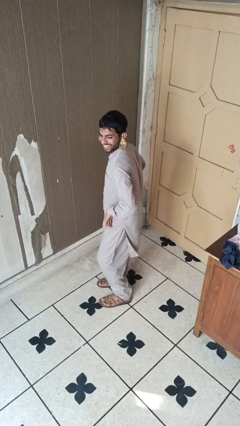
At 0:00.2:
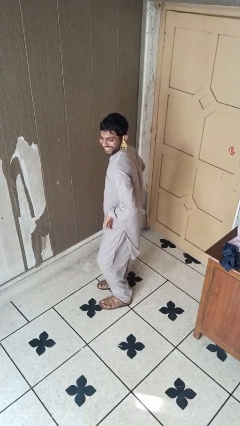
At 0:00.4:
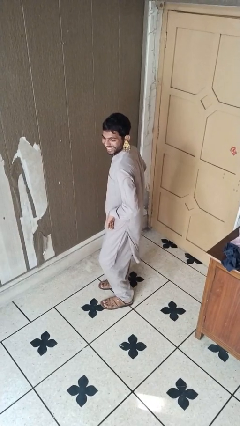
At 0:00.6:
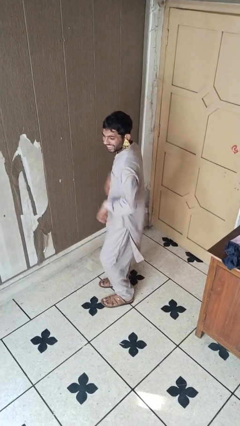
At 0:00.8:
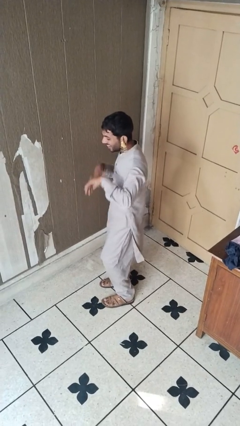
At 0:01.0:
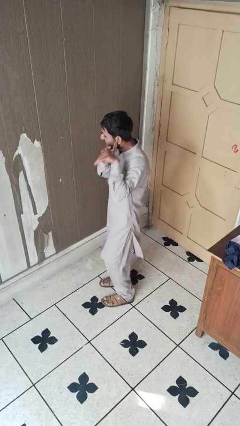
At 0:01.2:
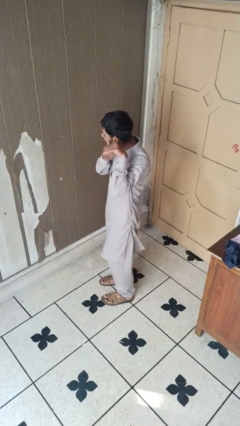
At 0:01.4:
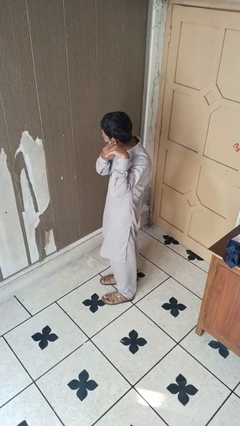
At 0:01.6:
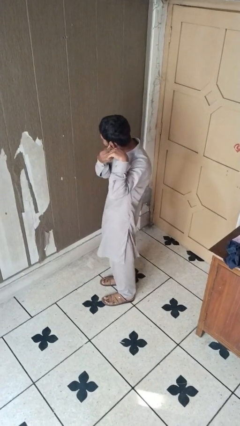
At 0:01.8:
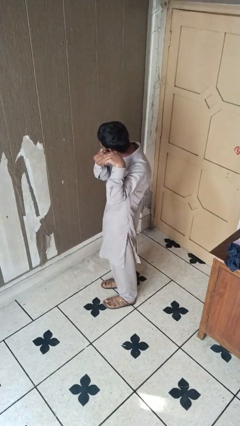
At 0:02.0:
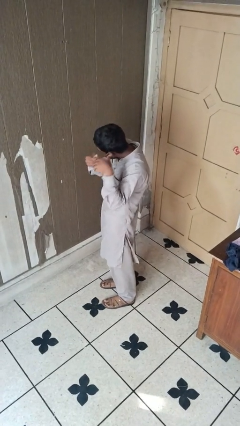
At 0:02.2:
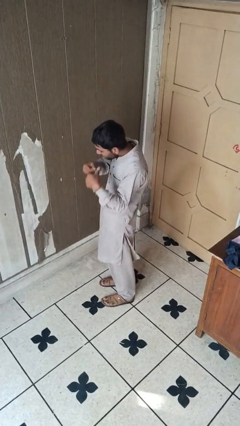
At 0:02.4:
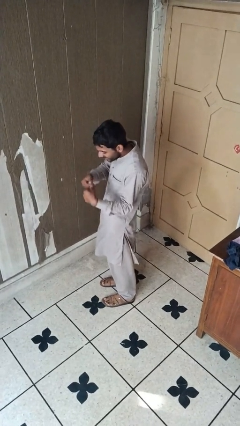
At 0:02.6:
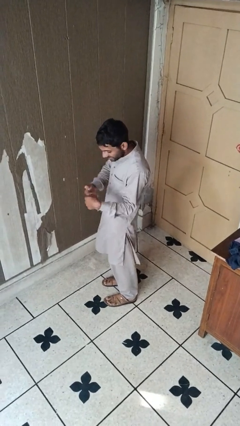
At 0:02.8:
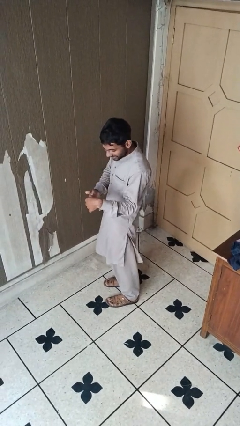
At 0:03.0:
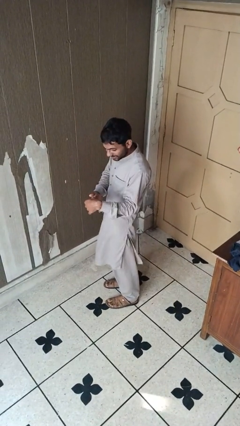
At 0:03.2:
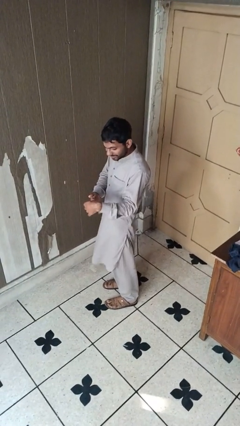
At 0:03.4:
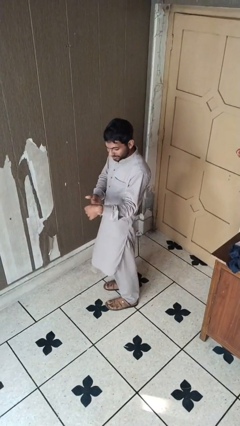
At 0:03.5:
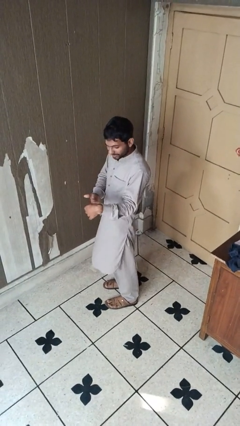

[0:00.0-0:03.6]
person takes off earrings

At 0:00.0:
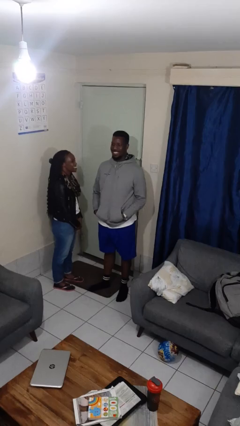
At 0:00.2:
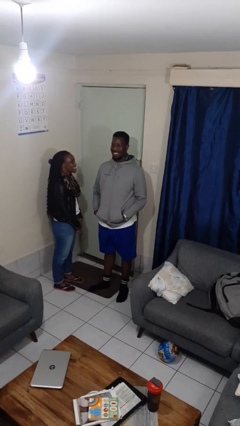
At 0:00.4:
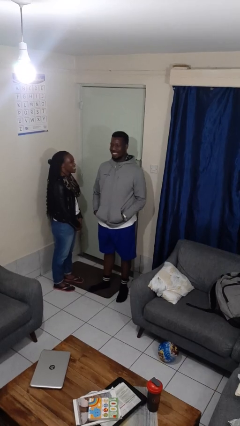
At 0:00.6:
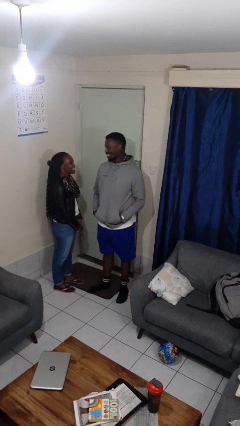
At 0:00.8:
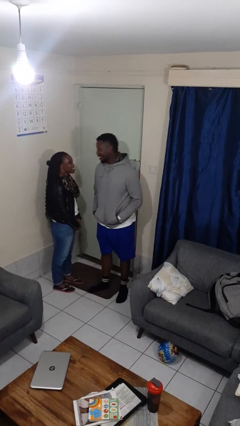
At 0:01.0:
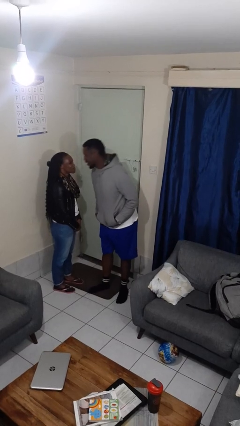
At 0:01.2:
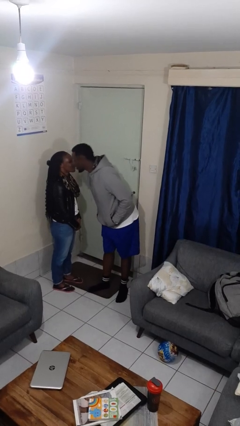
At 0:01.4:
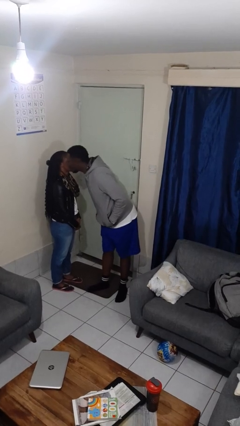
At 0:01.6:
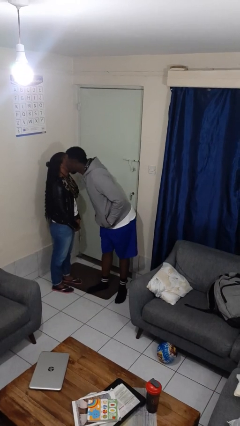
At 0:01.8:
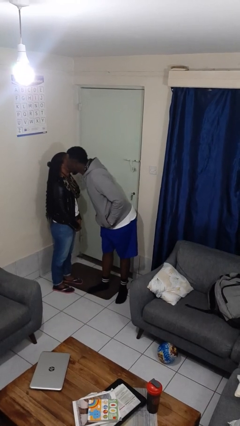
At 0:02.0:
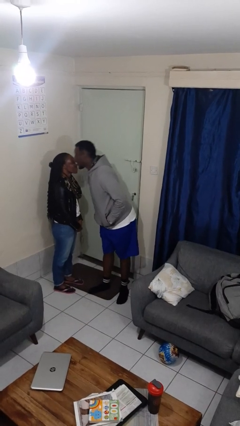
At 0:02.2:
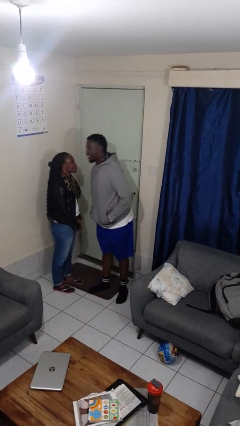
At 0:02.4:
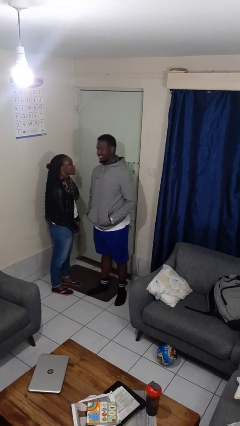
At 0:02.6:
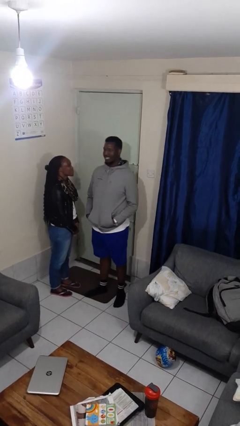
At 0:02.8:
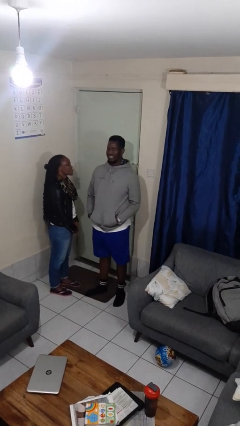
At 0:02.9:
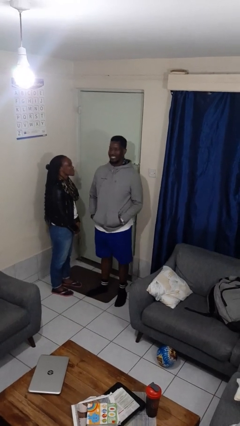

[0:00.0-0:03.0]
person kisses cheek of person

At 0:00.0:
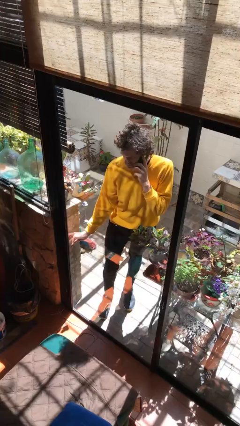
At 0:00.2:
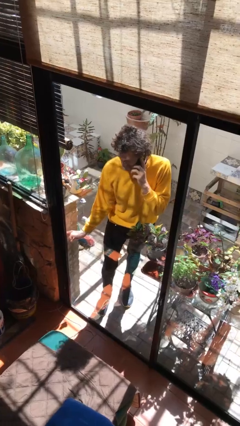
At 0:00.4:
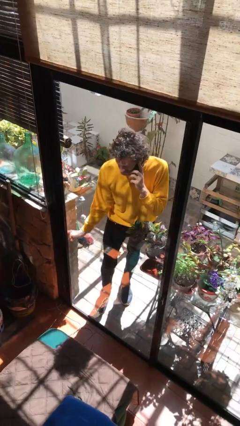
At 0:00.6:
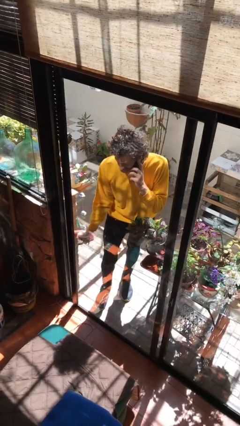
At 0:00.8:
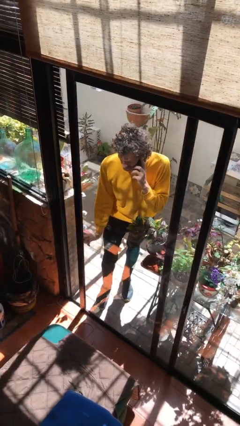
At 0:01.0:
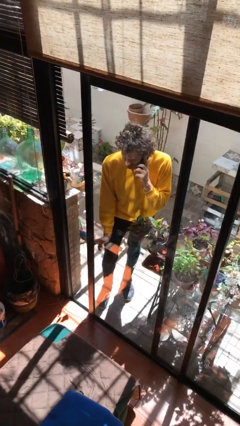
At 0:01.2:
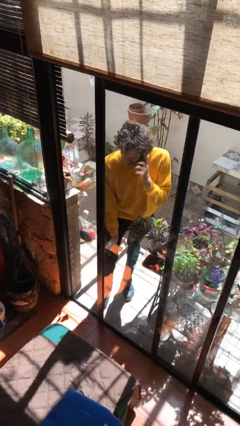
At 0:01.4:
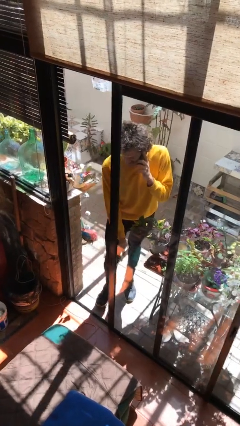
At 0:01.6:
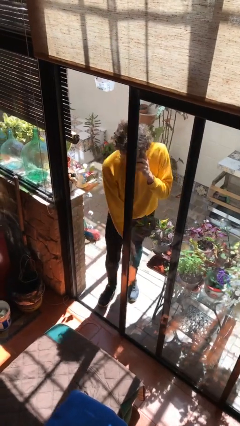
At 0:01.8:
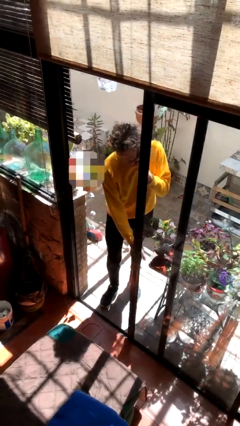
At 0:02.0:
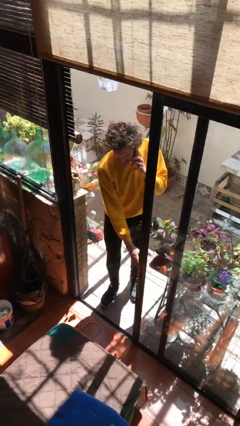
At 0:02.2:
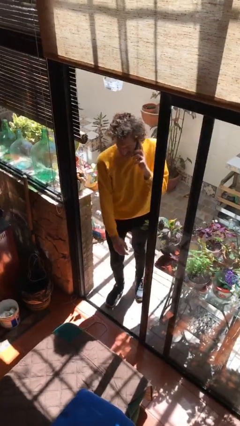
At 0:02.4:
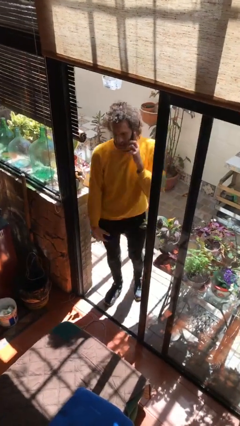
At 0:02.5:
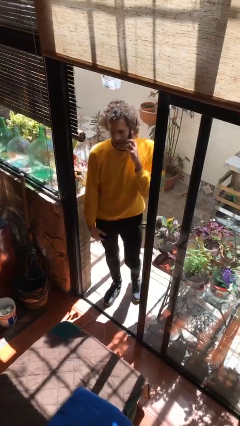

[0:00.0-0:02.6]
person opens facility door

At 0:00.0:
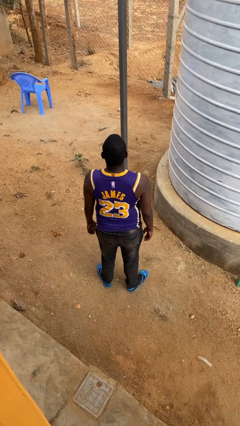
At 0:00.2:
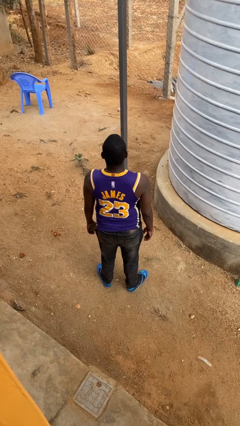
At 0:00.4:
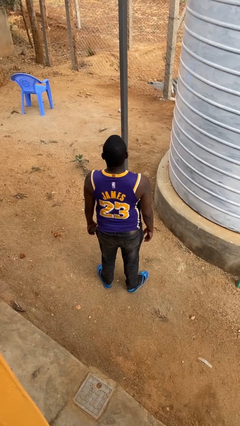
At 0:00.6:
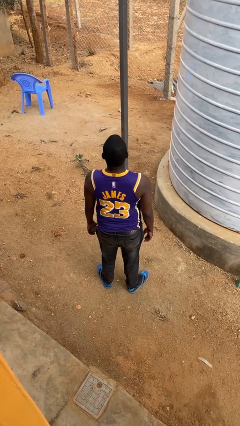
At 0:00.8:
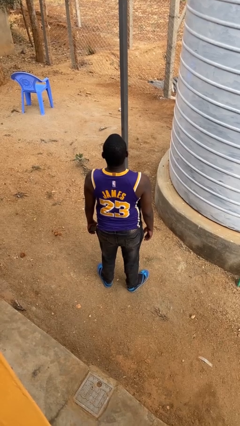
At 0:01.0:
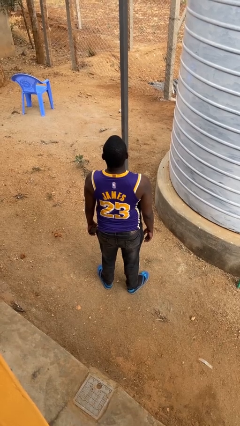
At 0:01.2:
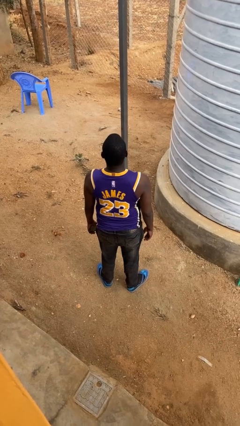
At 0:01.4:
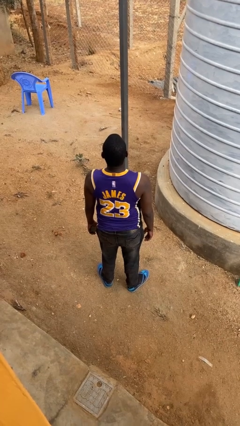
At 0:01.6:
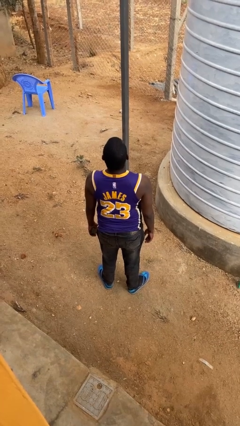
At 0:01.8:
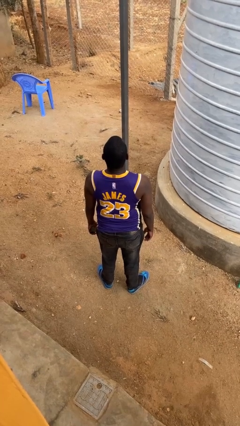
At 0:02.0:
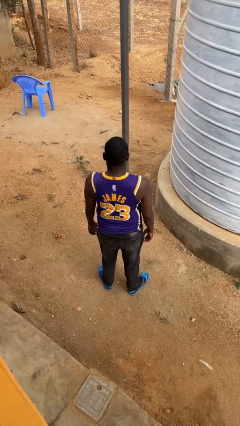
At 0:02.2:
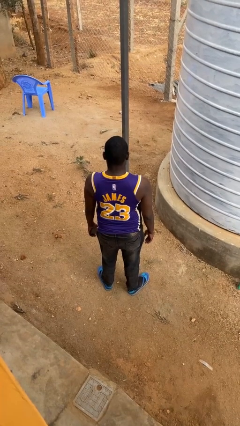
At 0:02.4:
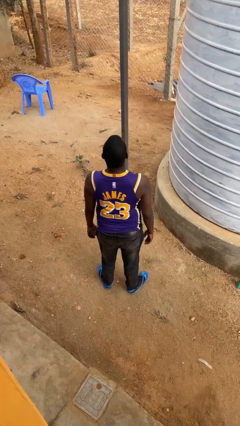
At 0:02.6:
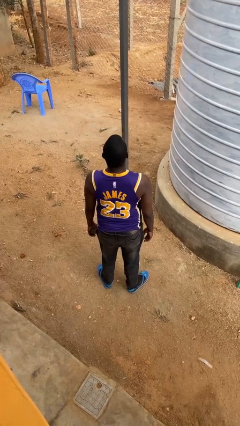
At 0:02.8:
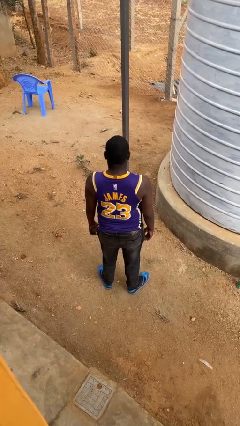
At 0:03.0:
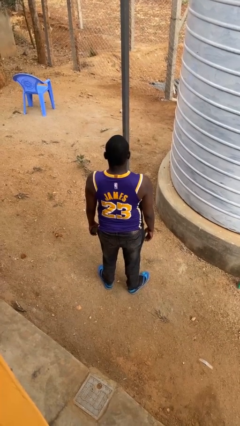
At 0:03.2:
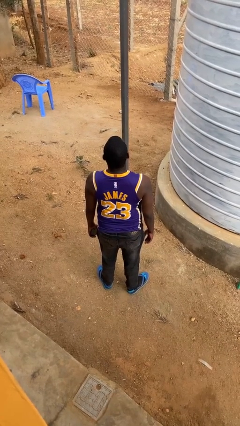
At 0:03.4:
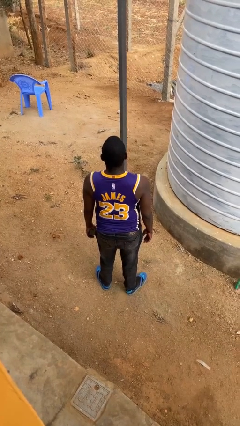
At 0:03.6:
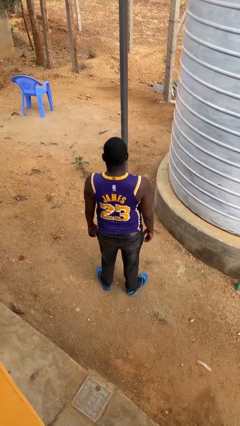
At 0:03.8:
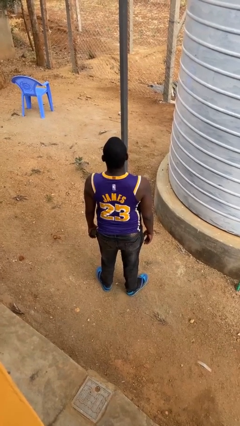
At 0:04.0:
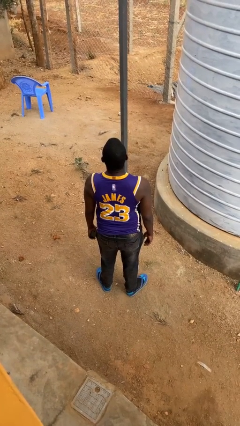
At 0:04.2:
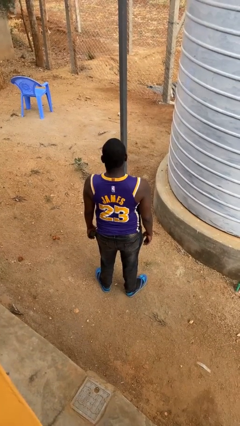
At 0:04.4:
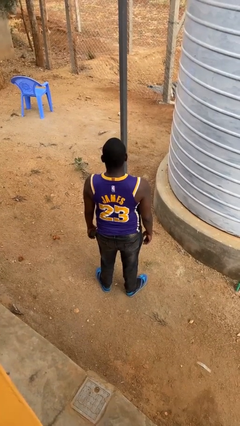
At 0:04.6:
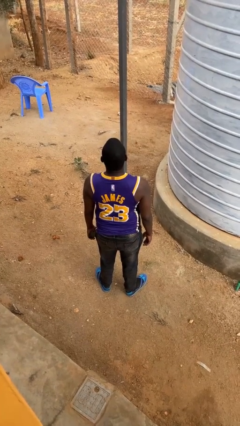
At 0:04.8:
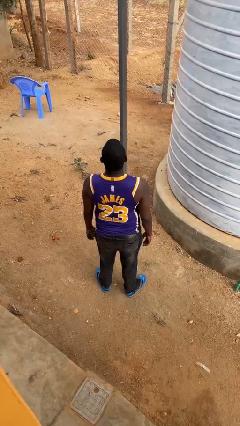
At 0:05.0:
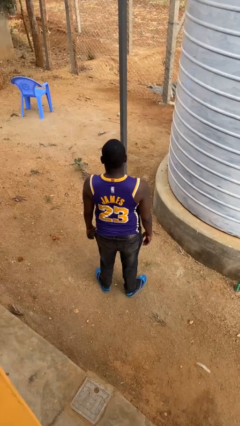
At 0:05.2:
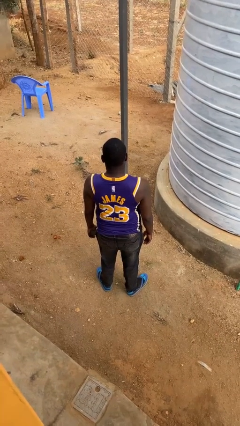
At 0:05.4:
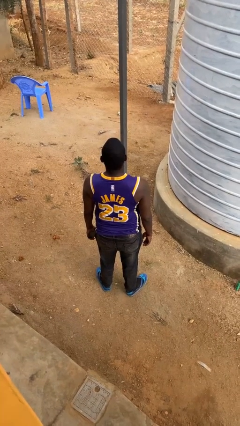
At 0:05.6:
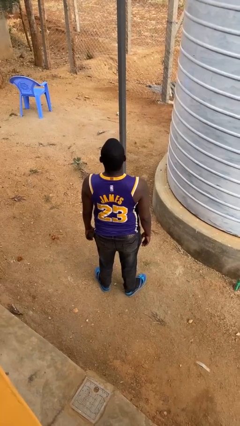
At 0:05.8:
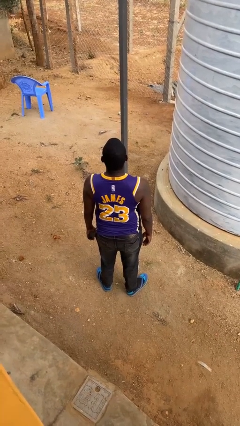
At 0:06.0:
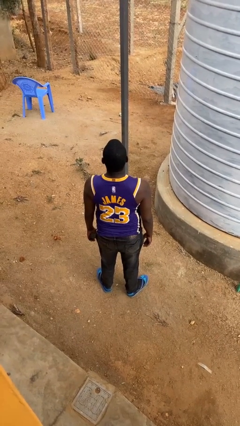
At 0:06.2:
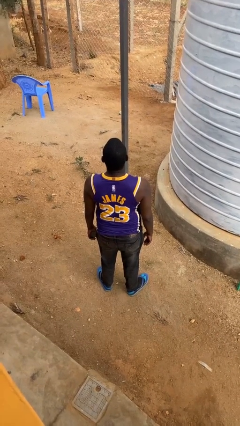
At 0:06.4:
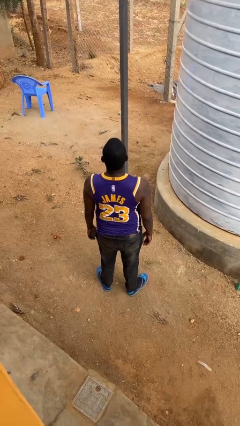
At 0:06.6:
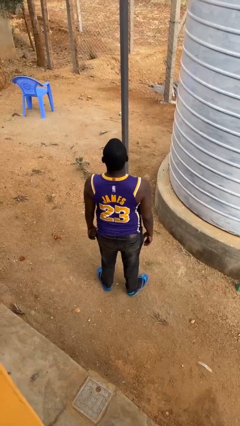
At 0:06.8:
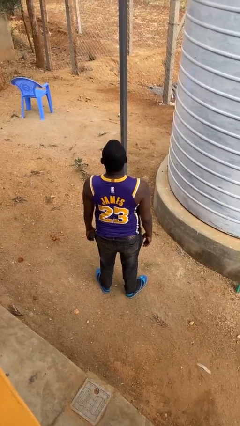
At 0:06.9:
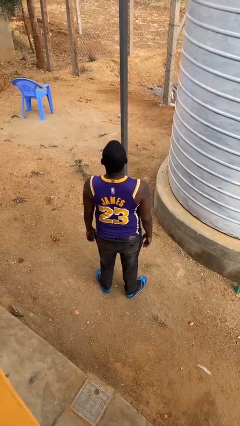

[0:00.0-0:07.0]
person nods head

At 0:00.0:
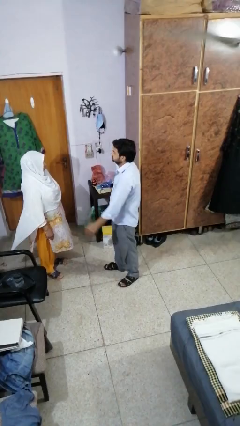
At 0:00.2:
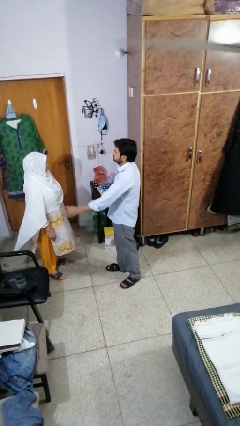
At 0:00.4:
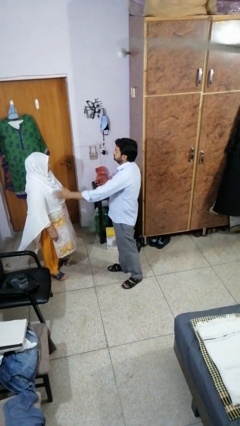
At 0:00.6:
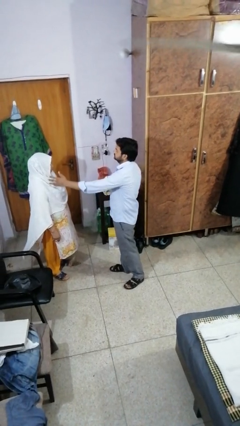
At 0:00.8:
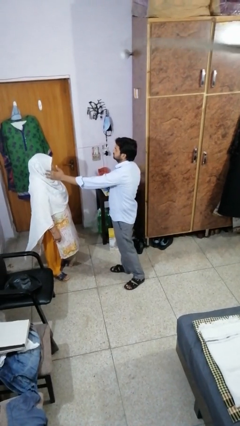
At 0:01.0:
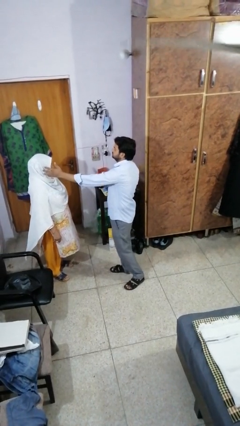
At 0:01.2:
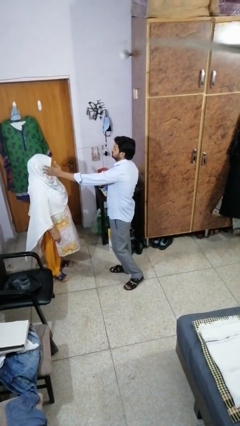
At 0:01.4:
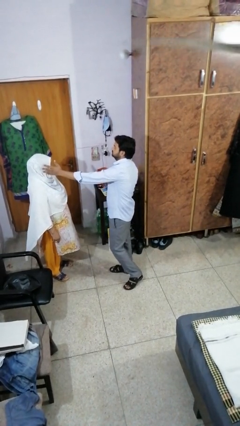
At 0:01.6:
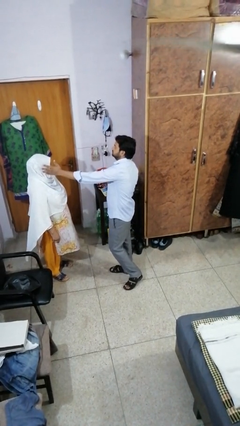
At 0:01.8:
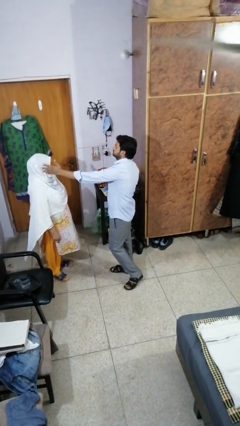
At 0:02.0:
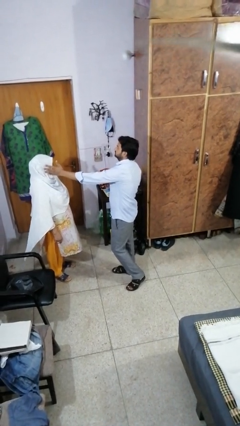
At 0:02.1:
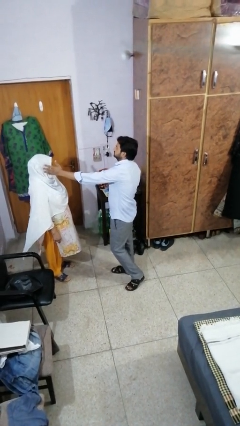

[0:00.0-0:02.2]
person touches face of person
